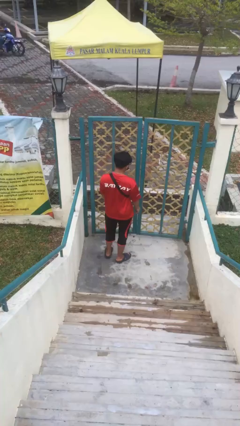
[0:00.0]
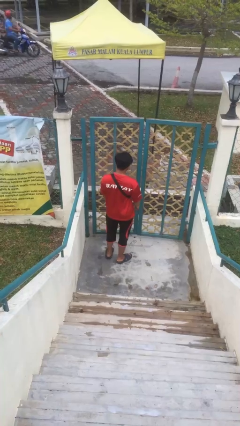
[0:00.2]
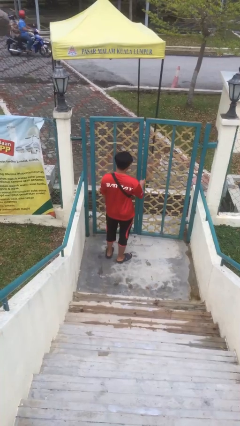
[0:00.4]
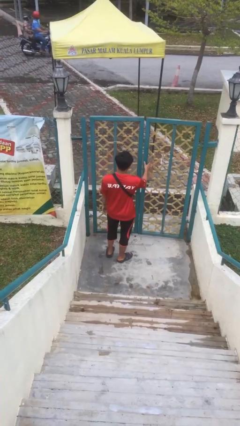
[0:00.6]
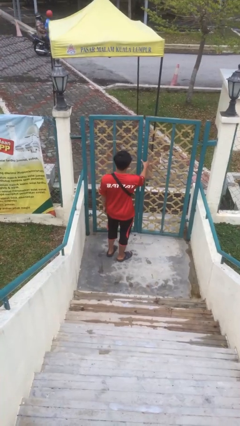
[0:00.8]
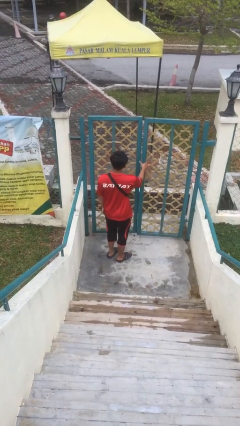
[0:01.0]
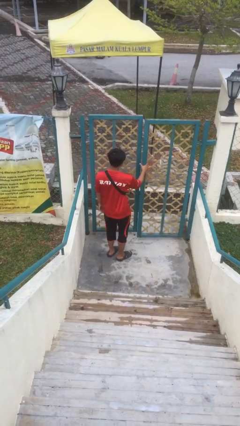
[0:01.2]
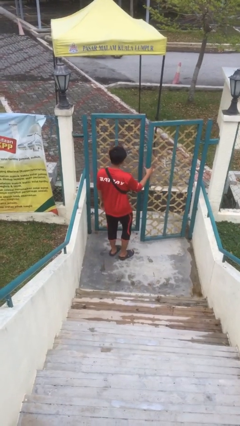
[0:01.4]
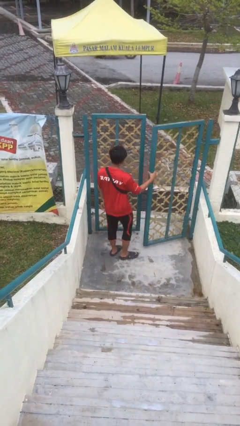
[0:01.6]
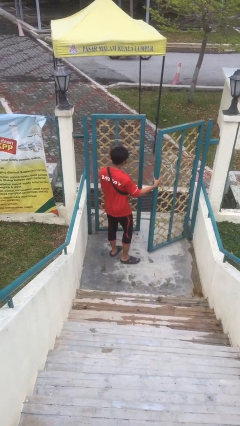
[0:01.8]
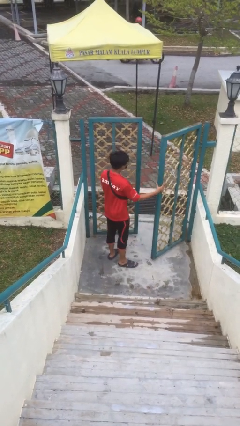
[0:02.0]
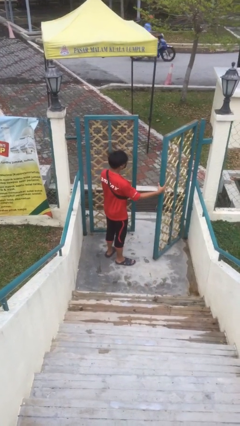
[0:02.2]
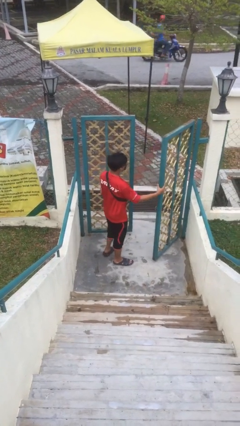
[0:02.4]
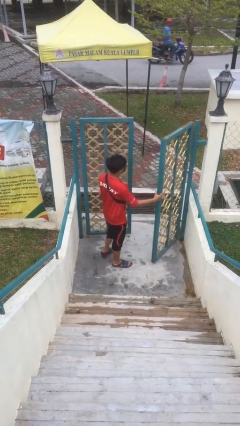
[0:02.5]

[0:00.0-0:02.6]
person opens facility door

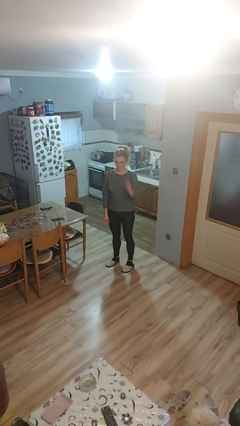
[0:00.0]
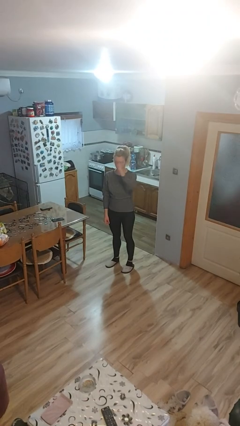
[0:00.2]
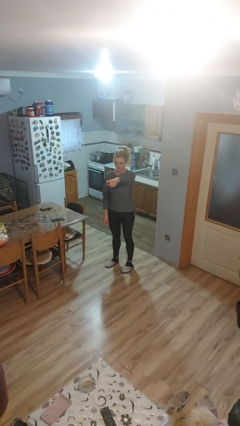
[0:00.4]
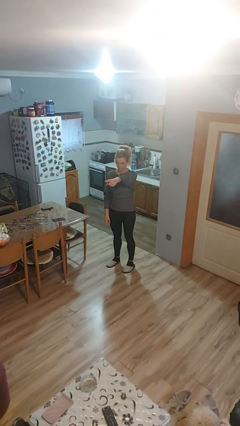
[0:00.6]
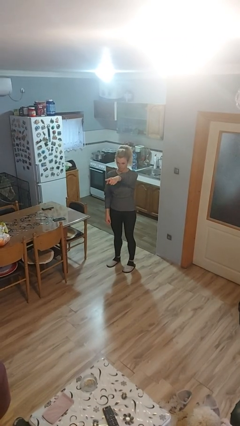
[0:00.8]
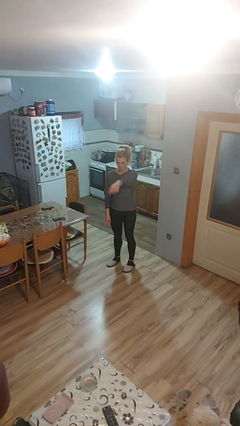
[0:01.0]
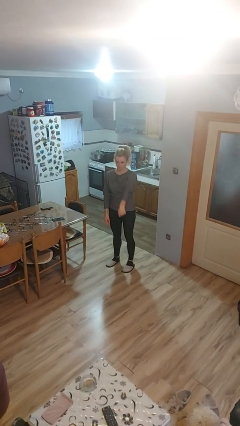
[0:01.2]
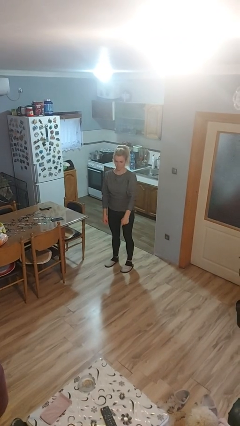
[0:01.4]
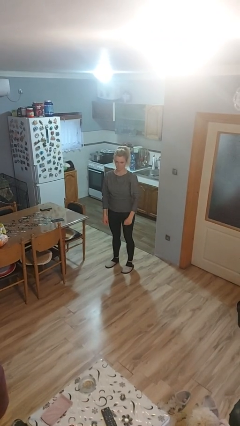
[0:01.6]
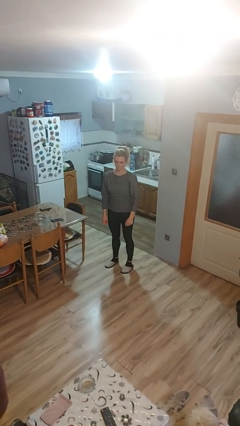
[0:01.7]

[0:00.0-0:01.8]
person points at person

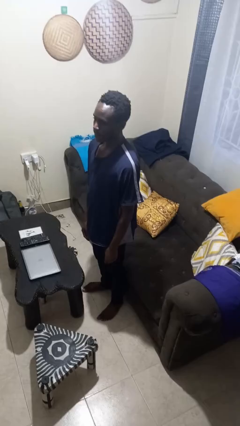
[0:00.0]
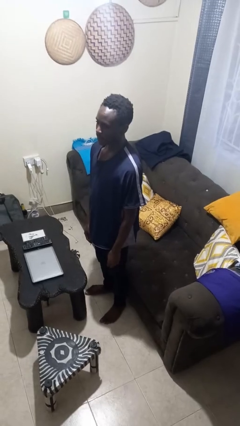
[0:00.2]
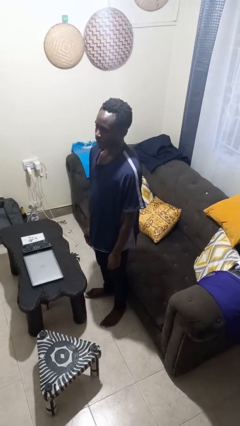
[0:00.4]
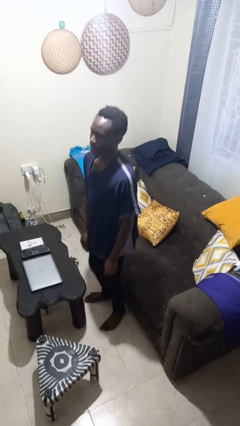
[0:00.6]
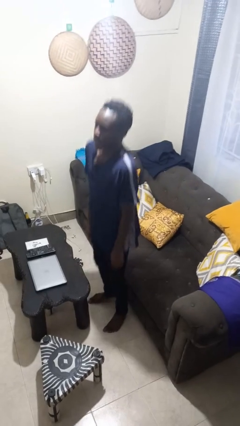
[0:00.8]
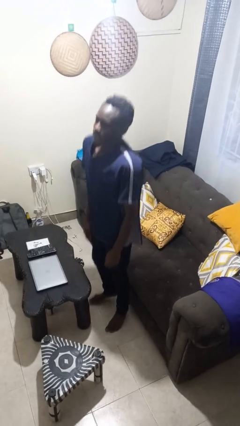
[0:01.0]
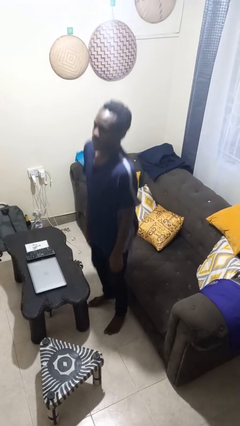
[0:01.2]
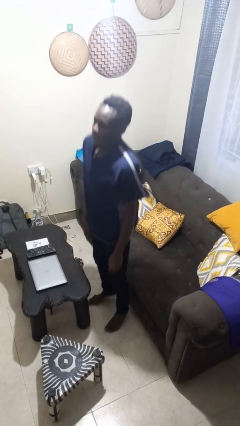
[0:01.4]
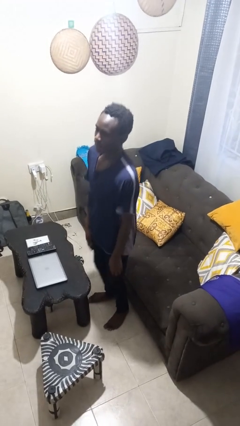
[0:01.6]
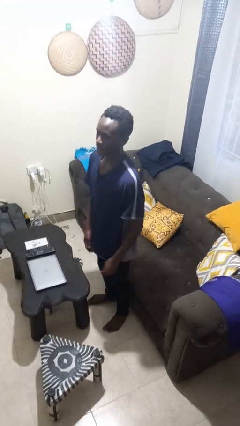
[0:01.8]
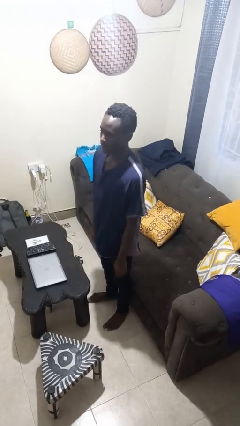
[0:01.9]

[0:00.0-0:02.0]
person jumps

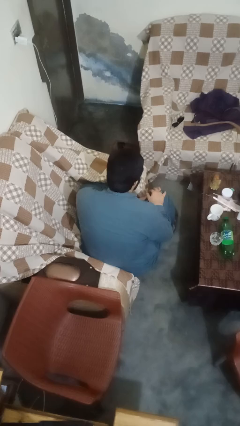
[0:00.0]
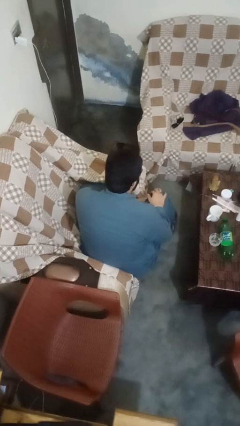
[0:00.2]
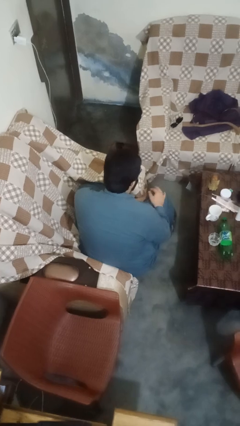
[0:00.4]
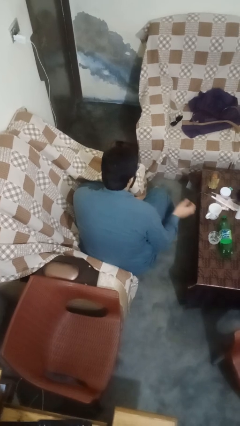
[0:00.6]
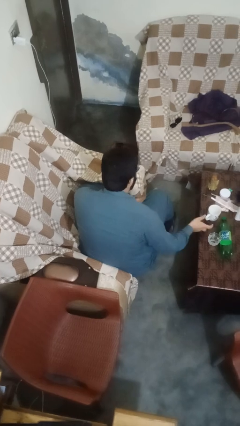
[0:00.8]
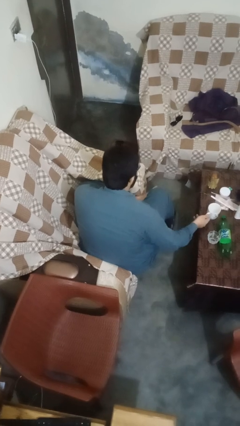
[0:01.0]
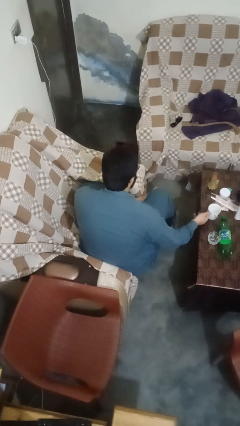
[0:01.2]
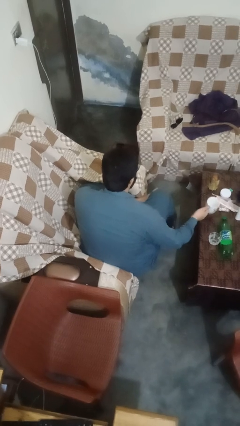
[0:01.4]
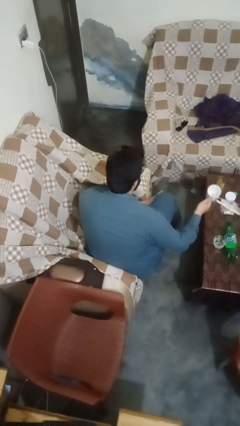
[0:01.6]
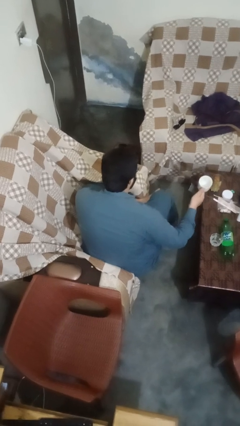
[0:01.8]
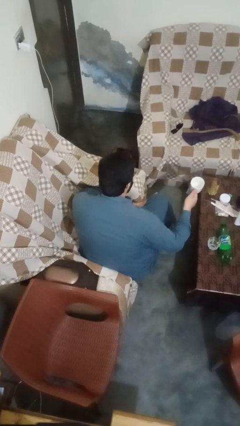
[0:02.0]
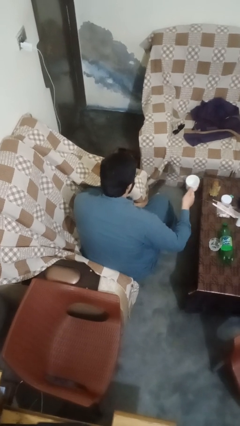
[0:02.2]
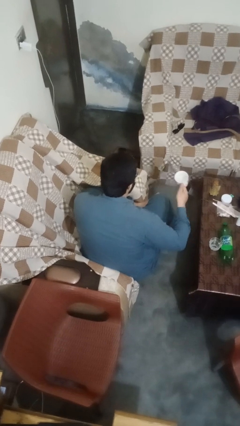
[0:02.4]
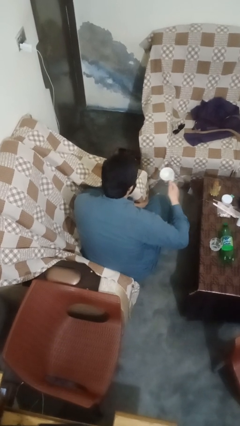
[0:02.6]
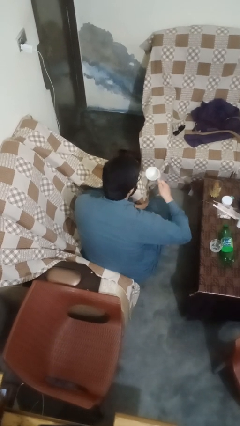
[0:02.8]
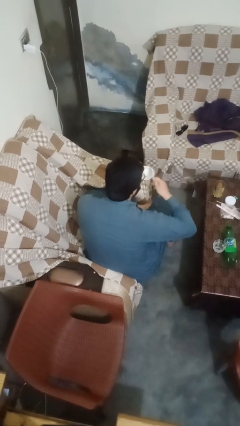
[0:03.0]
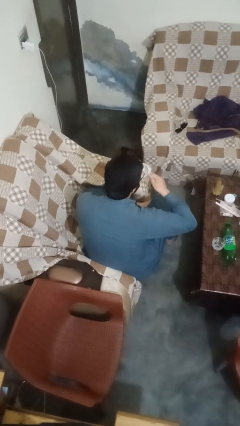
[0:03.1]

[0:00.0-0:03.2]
person picks up object from table

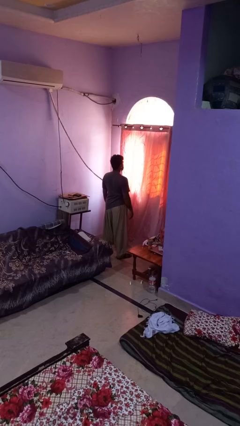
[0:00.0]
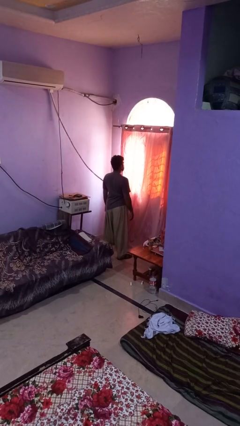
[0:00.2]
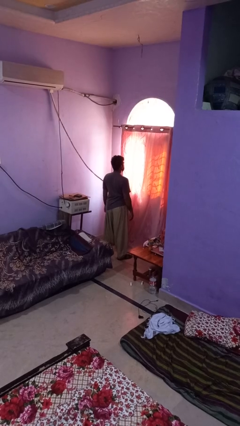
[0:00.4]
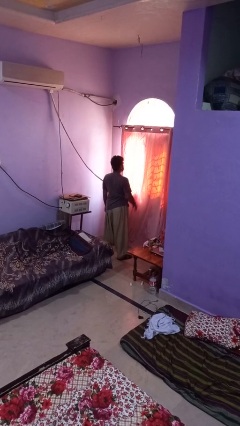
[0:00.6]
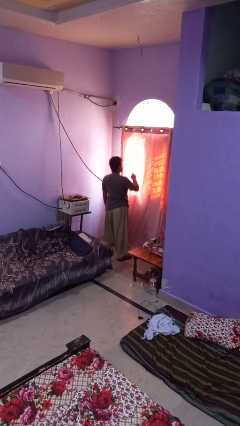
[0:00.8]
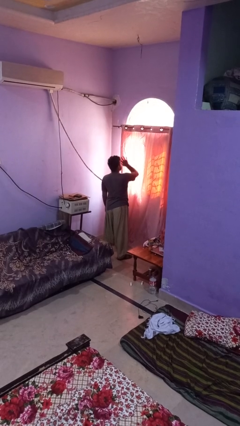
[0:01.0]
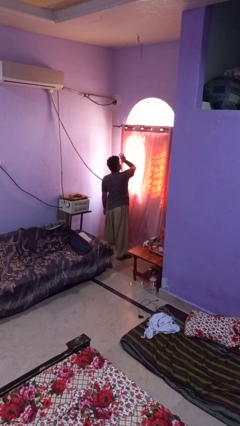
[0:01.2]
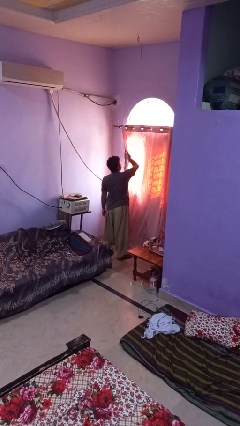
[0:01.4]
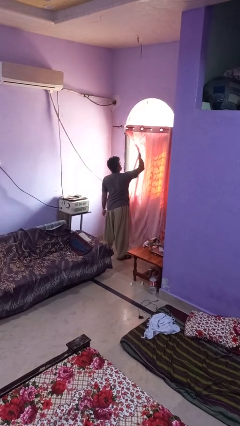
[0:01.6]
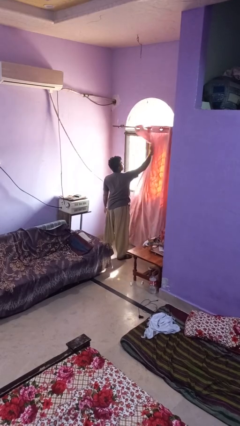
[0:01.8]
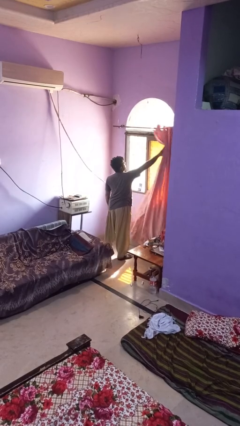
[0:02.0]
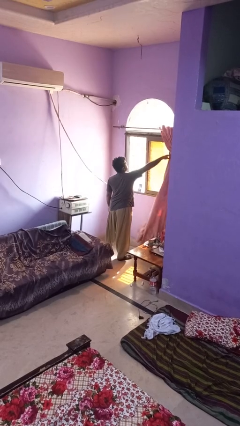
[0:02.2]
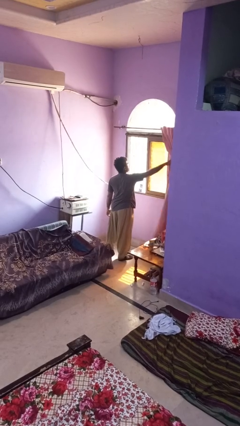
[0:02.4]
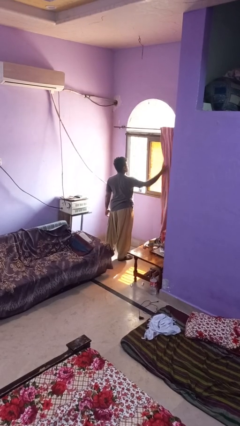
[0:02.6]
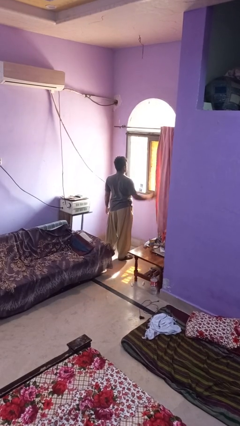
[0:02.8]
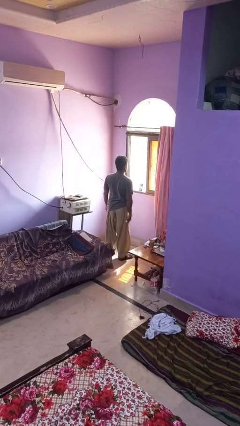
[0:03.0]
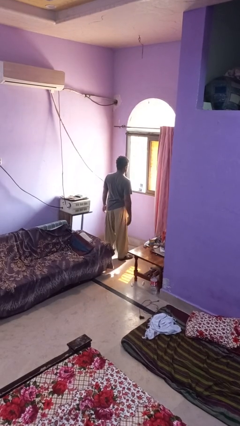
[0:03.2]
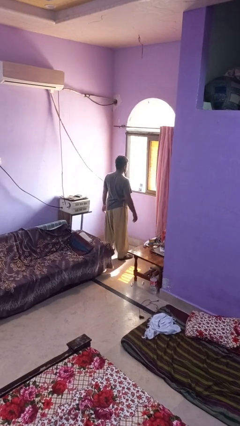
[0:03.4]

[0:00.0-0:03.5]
person opens curtains

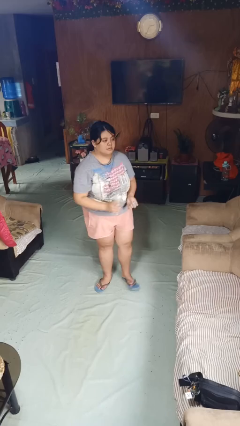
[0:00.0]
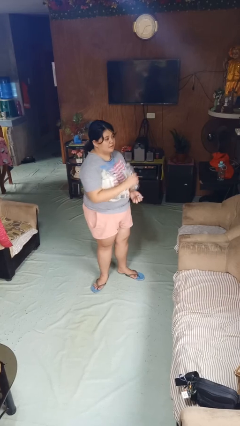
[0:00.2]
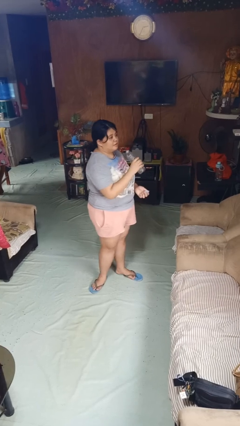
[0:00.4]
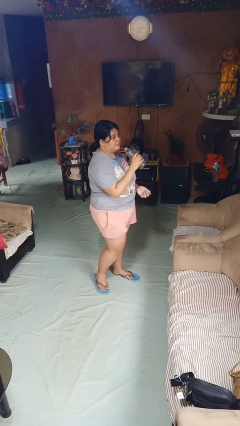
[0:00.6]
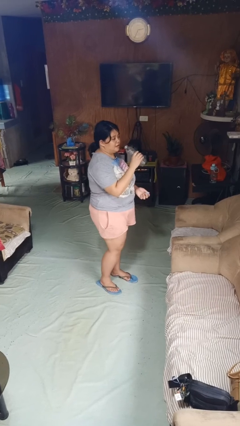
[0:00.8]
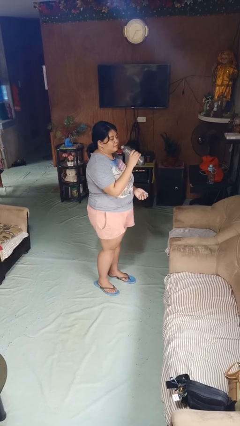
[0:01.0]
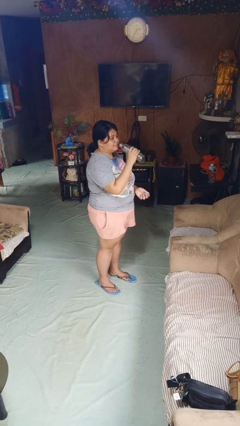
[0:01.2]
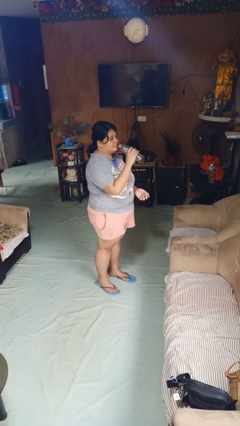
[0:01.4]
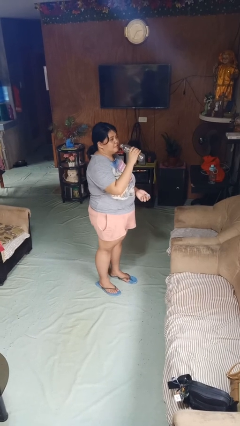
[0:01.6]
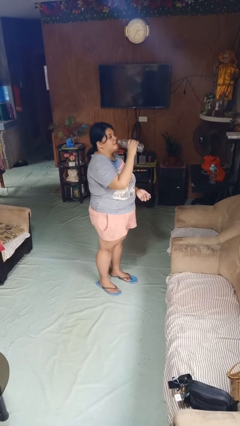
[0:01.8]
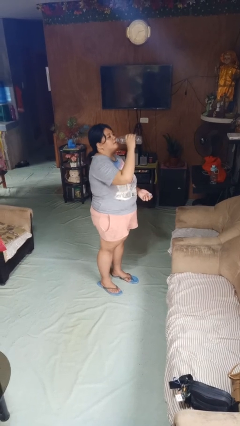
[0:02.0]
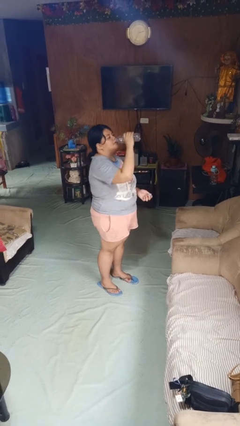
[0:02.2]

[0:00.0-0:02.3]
person drinks from bottle

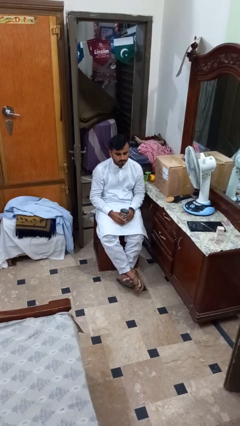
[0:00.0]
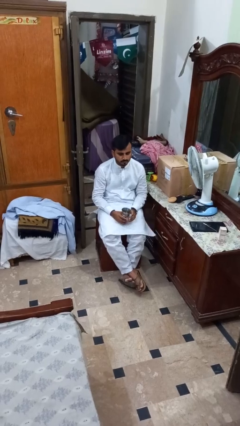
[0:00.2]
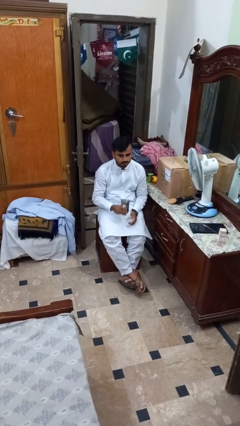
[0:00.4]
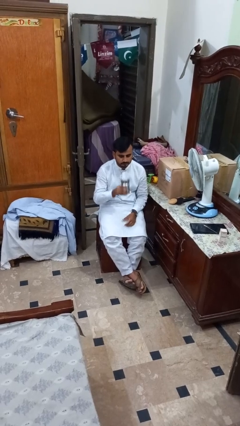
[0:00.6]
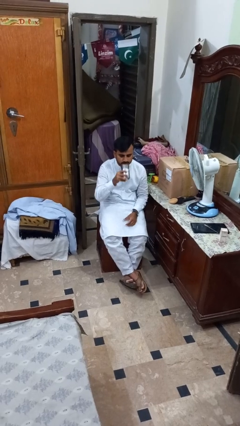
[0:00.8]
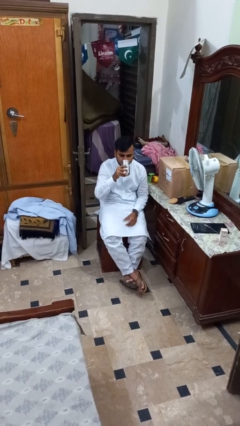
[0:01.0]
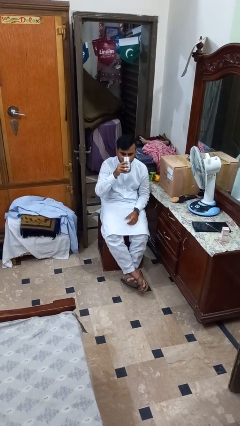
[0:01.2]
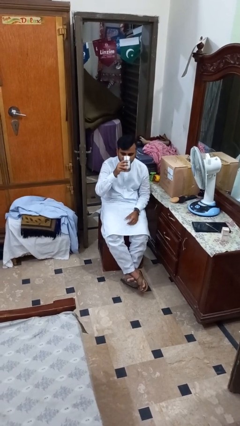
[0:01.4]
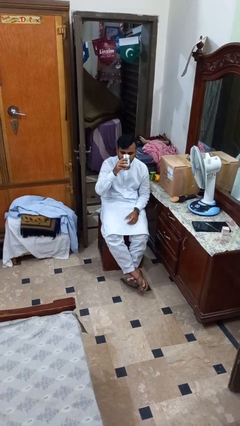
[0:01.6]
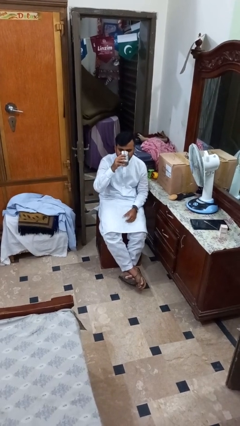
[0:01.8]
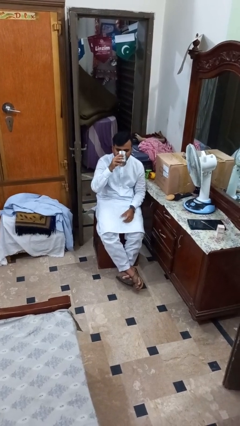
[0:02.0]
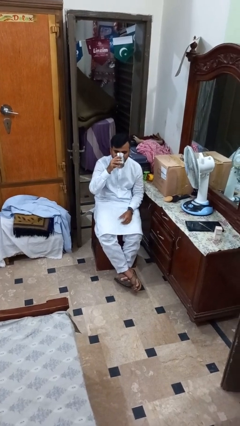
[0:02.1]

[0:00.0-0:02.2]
person drinks from mug

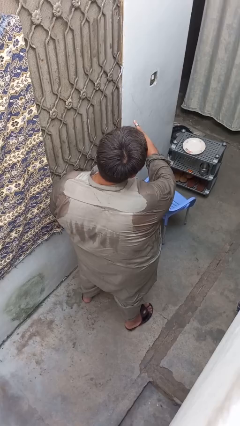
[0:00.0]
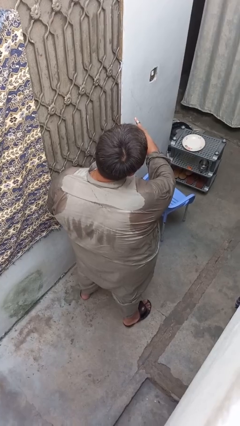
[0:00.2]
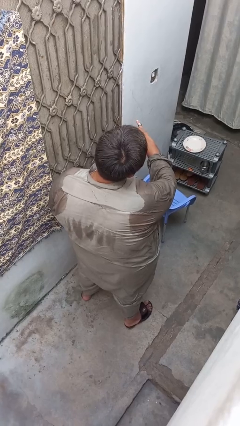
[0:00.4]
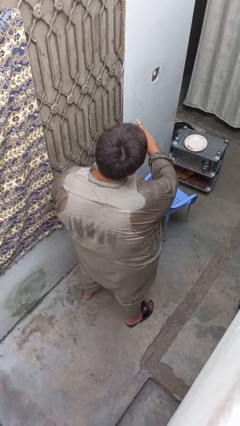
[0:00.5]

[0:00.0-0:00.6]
person takes off ring
